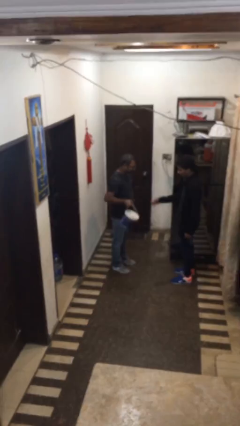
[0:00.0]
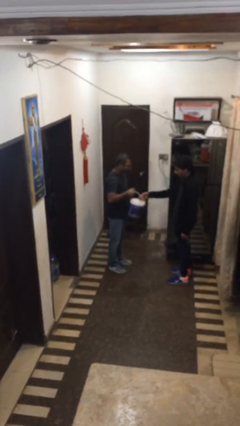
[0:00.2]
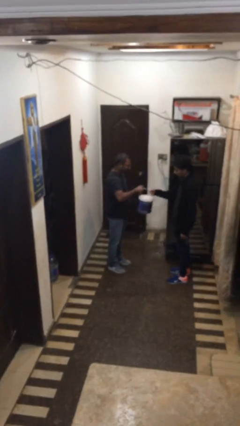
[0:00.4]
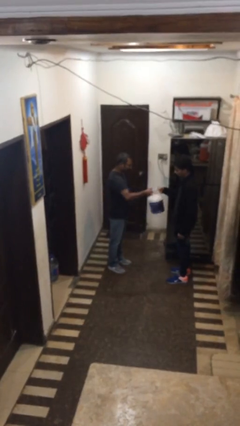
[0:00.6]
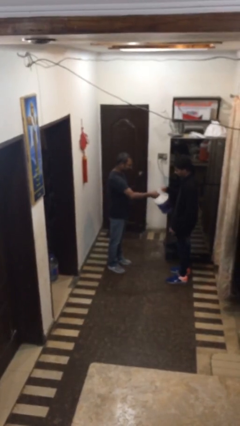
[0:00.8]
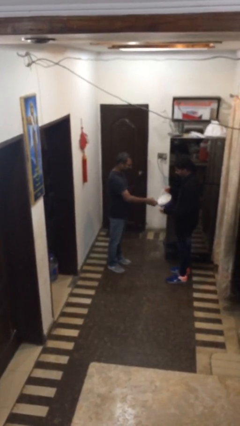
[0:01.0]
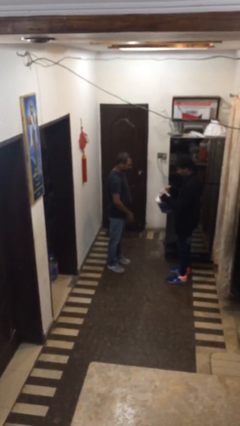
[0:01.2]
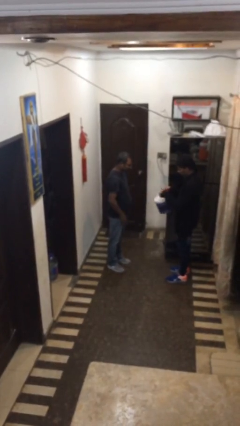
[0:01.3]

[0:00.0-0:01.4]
person transfers object to person

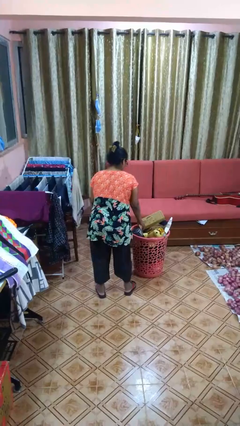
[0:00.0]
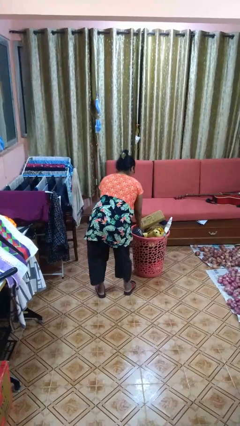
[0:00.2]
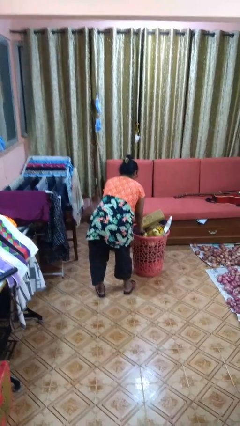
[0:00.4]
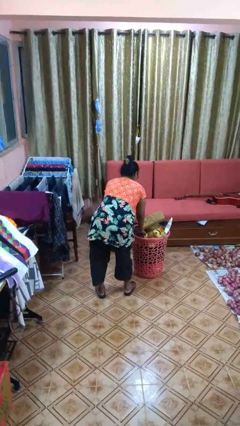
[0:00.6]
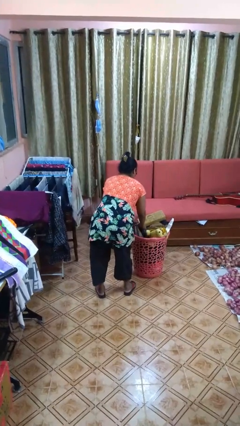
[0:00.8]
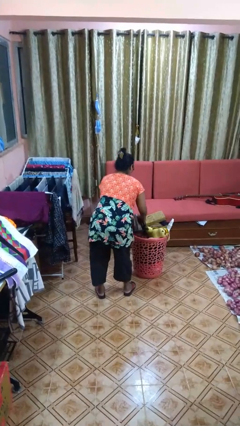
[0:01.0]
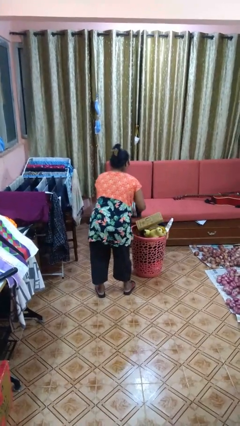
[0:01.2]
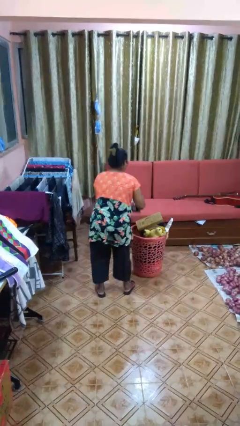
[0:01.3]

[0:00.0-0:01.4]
person takes object from basket

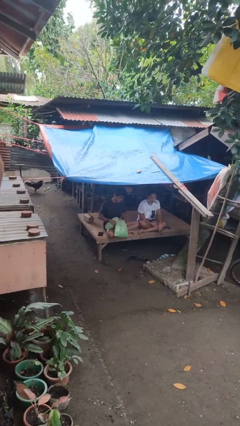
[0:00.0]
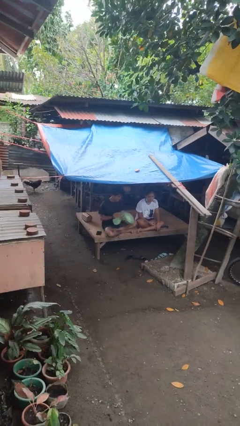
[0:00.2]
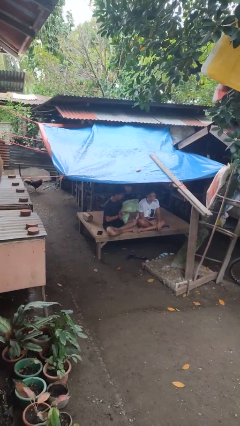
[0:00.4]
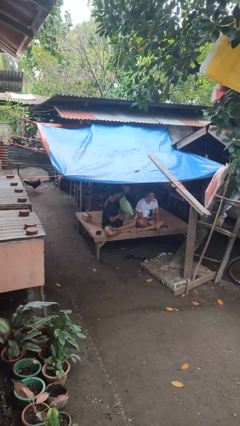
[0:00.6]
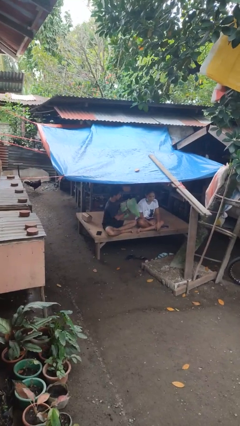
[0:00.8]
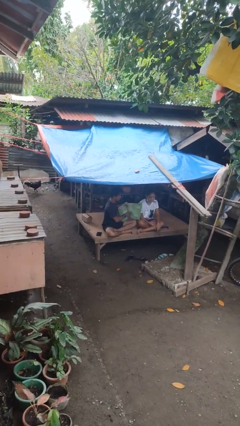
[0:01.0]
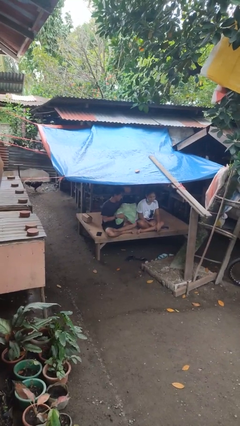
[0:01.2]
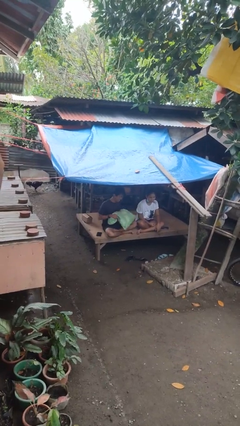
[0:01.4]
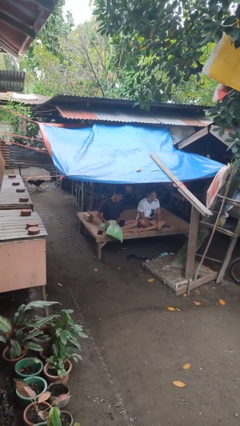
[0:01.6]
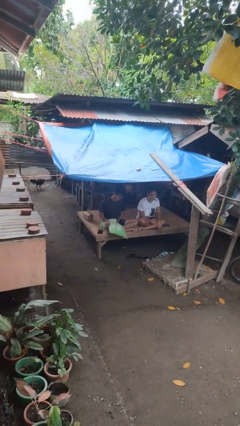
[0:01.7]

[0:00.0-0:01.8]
person hits person with pillow

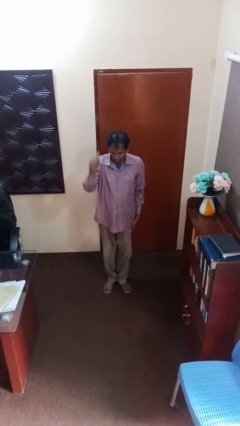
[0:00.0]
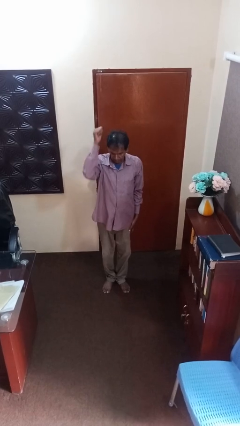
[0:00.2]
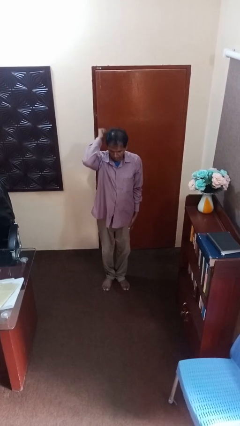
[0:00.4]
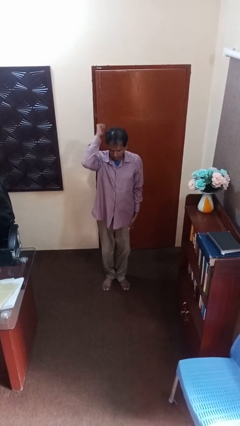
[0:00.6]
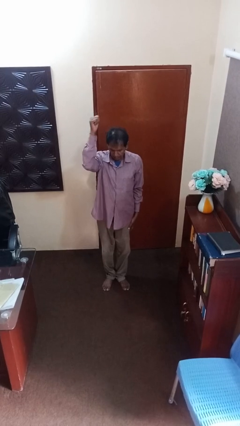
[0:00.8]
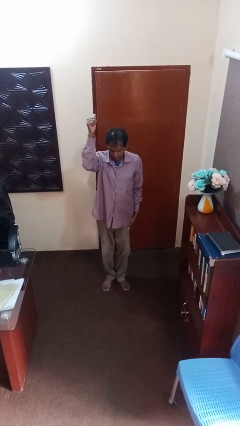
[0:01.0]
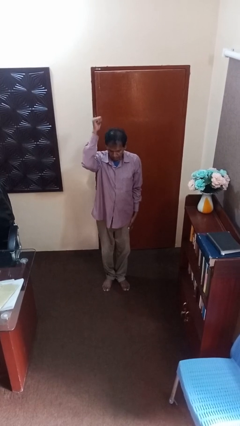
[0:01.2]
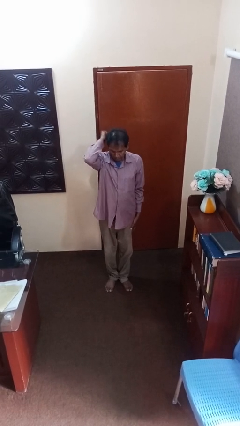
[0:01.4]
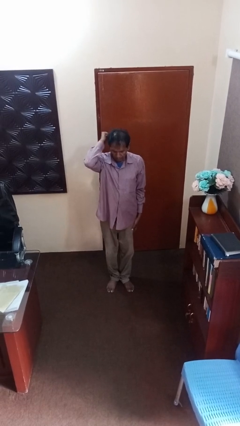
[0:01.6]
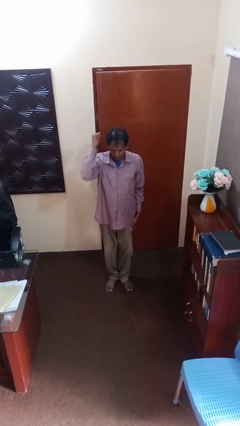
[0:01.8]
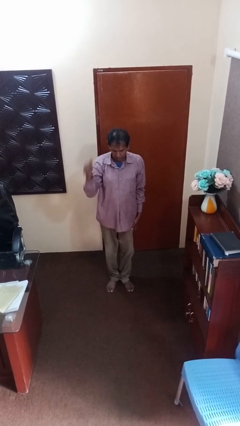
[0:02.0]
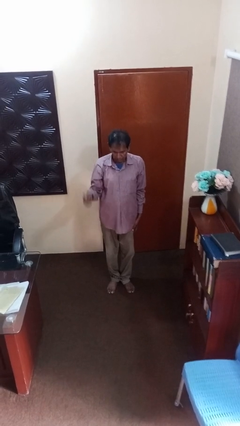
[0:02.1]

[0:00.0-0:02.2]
person gestures behind me

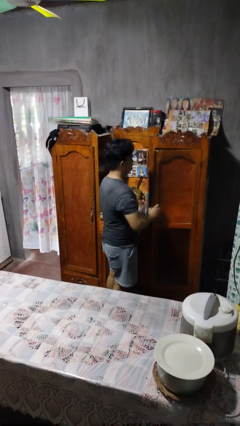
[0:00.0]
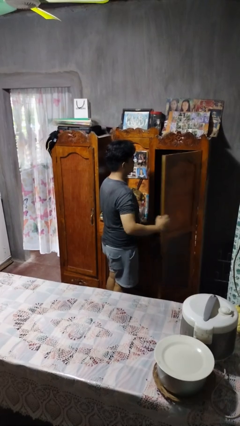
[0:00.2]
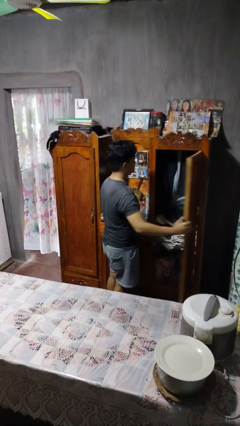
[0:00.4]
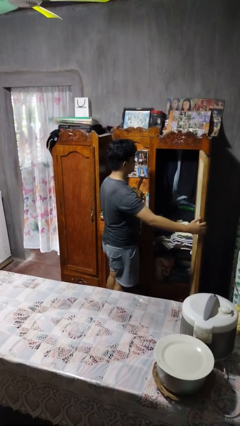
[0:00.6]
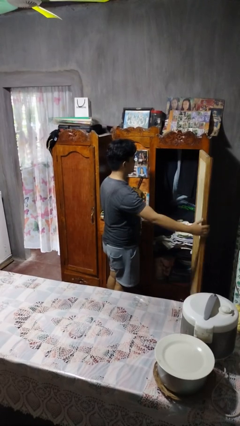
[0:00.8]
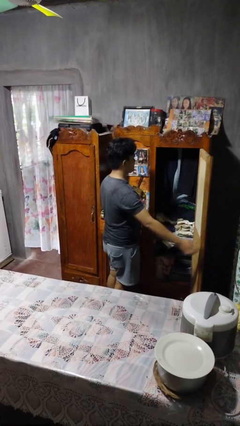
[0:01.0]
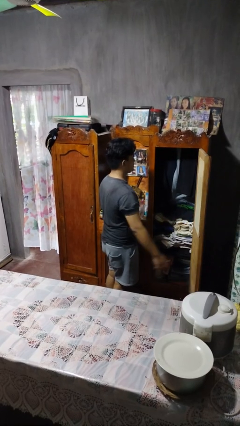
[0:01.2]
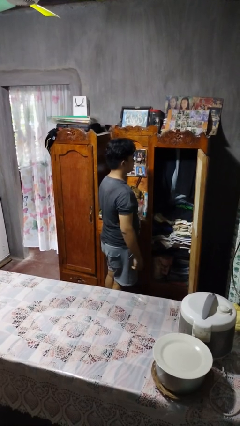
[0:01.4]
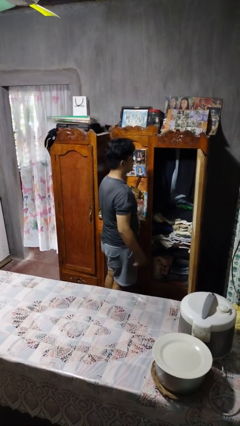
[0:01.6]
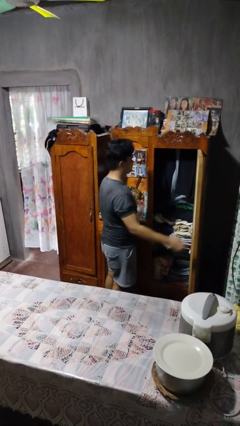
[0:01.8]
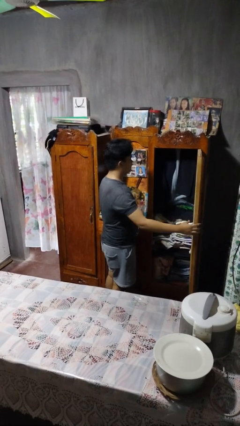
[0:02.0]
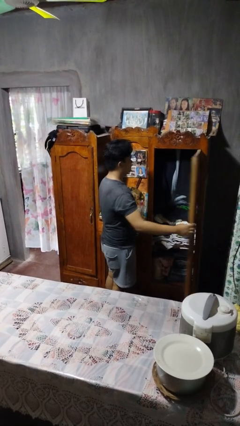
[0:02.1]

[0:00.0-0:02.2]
person opens closet door

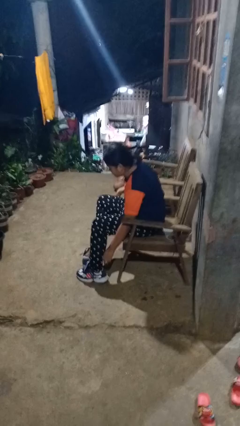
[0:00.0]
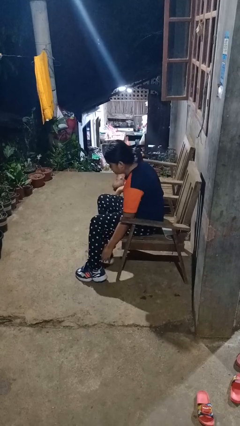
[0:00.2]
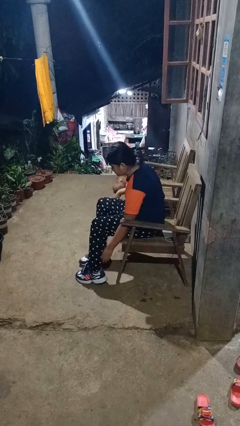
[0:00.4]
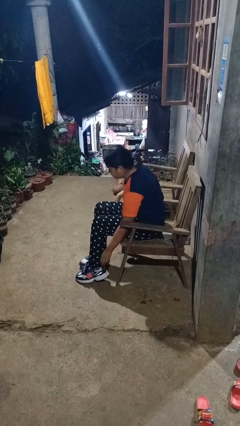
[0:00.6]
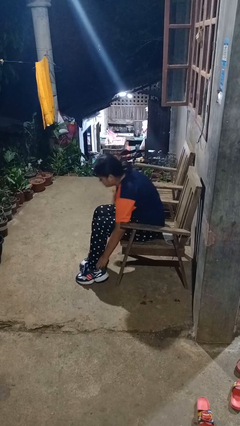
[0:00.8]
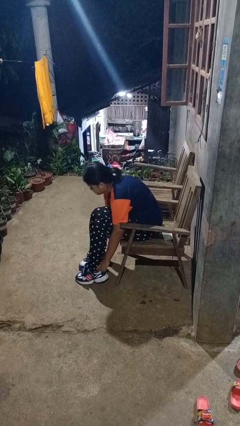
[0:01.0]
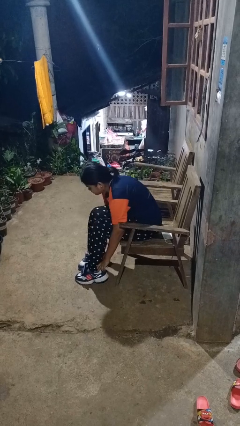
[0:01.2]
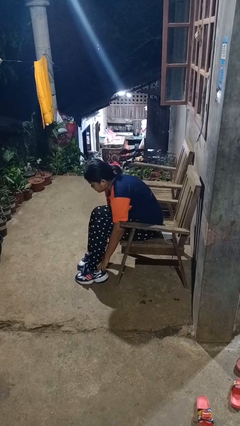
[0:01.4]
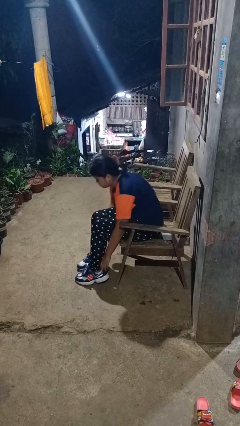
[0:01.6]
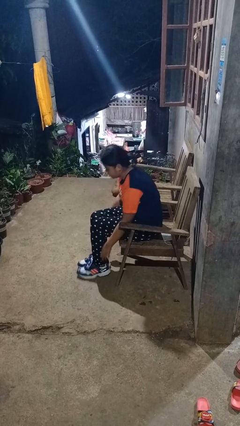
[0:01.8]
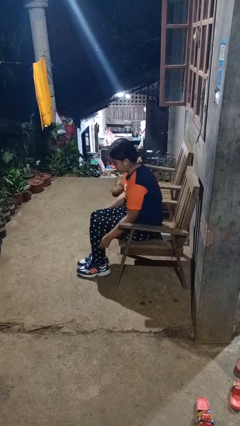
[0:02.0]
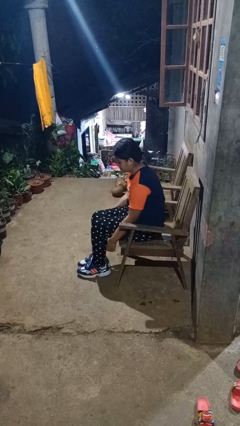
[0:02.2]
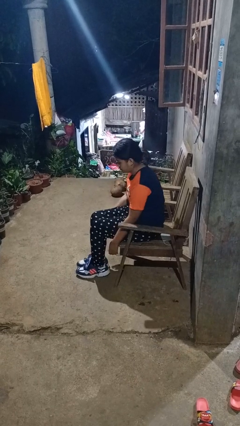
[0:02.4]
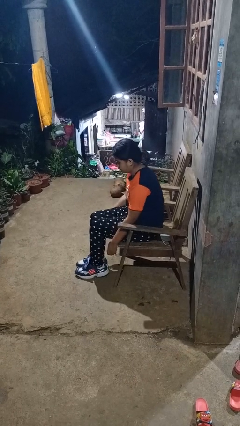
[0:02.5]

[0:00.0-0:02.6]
person puts on shoes

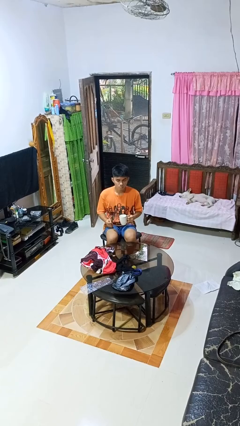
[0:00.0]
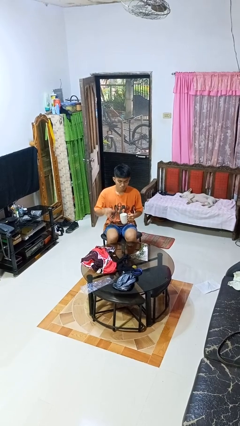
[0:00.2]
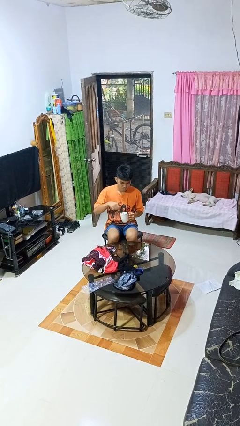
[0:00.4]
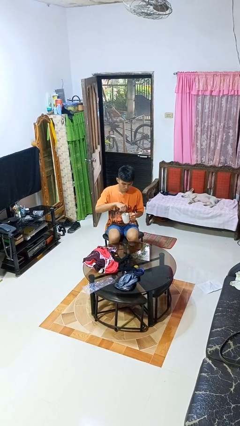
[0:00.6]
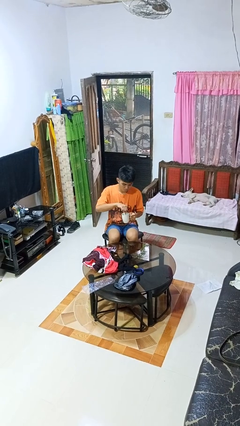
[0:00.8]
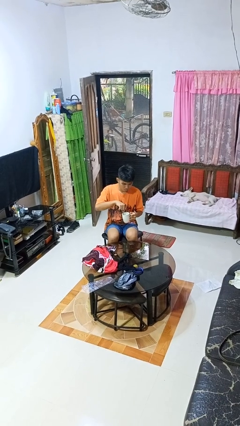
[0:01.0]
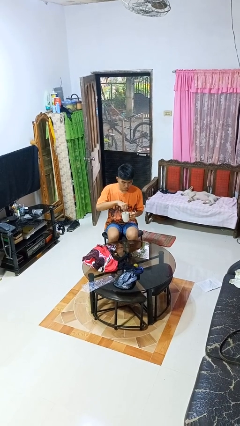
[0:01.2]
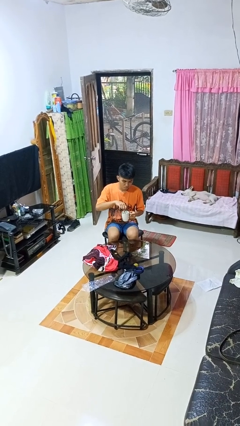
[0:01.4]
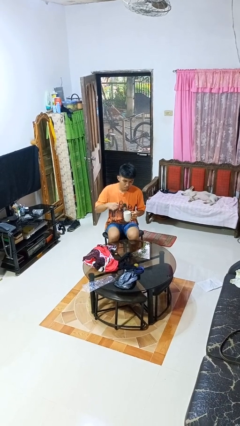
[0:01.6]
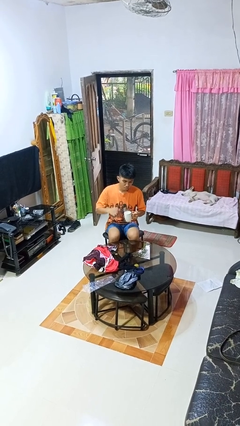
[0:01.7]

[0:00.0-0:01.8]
person stirs mug

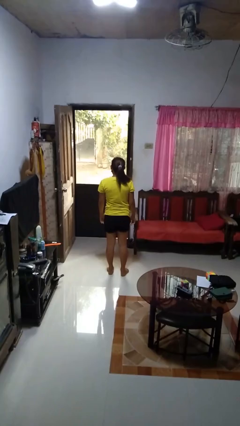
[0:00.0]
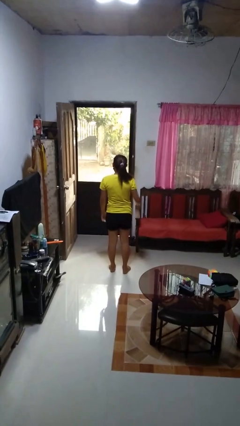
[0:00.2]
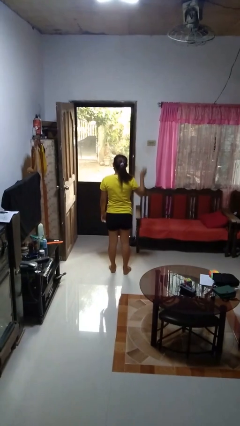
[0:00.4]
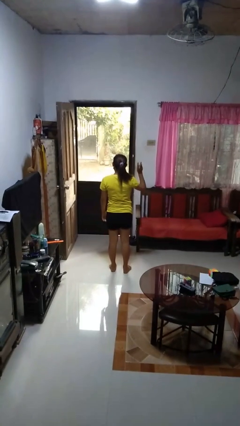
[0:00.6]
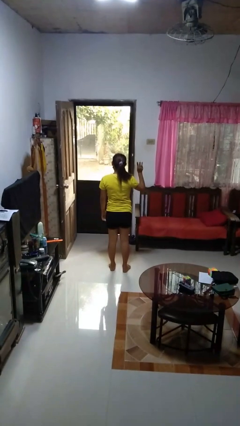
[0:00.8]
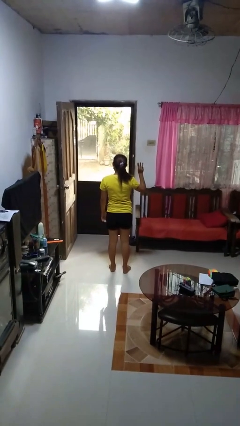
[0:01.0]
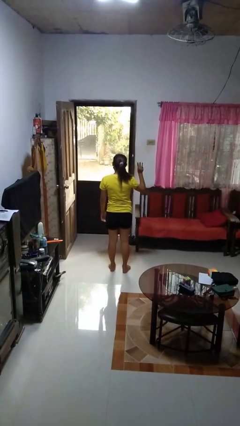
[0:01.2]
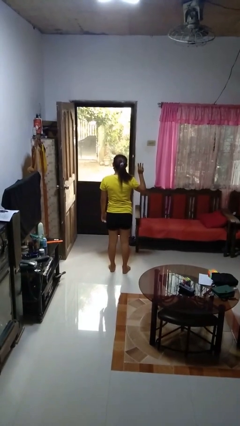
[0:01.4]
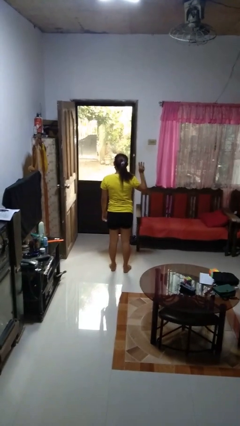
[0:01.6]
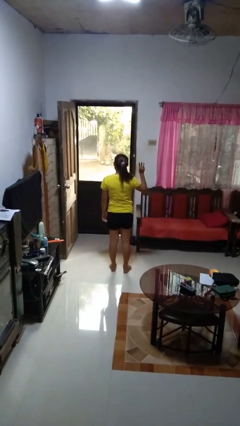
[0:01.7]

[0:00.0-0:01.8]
person gestures number three

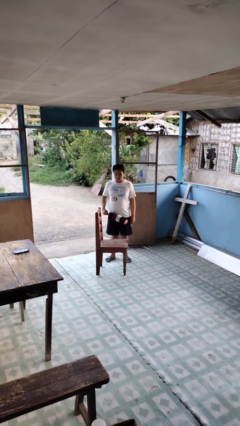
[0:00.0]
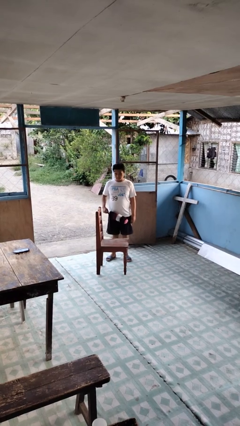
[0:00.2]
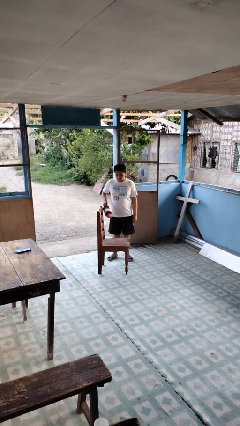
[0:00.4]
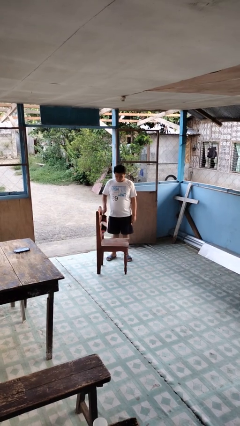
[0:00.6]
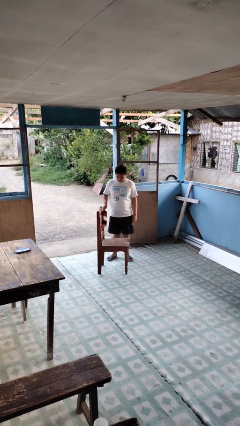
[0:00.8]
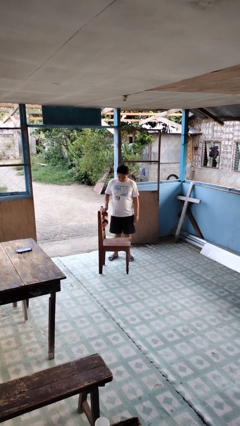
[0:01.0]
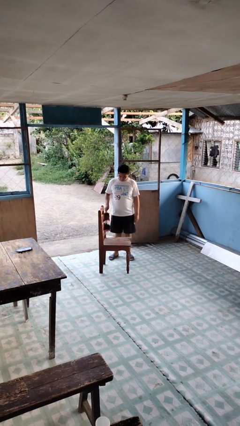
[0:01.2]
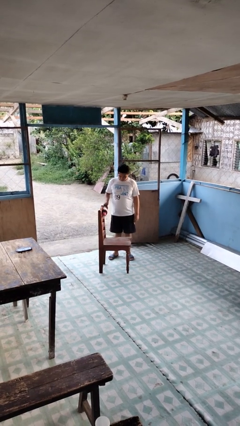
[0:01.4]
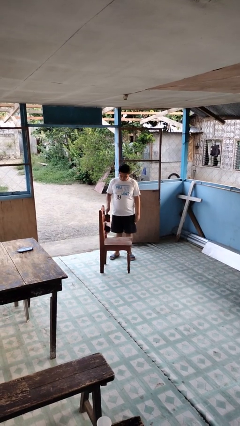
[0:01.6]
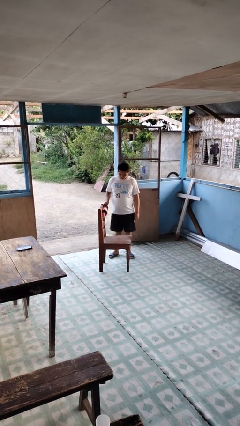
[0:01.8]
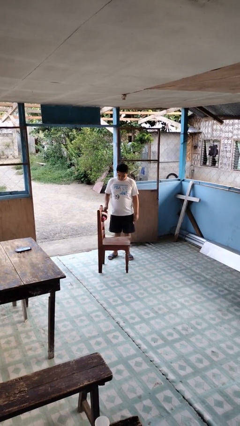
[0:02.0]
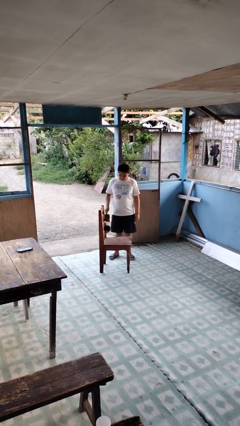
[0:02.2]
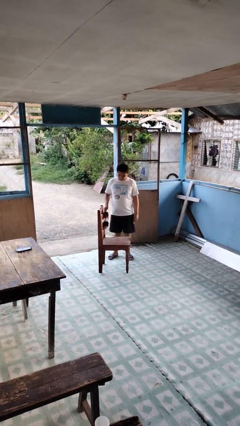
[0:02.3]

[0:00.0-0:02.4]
person dusts furniture
